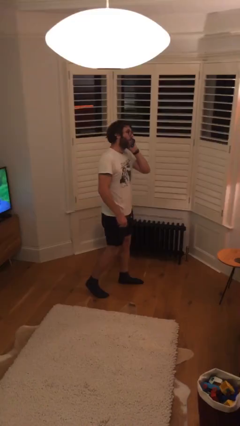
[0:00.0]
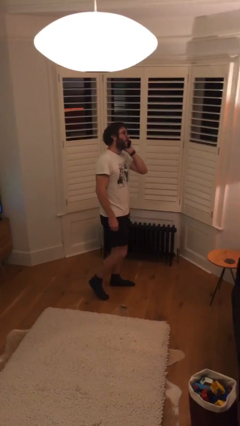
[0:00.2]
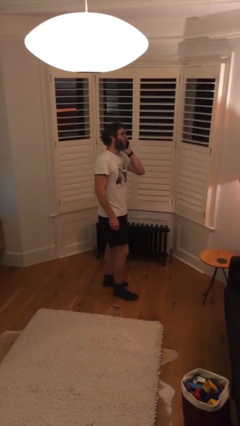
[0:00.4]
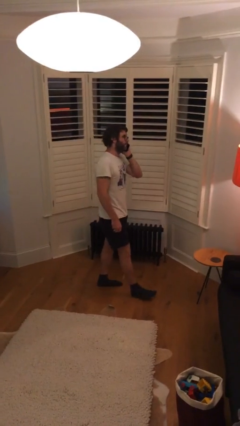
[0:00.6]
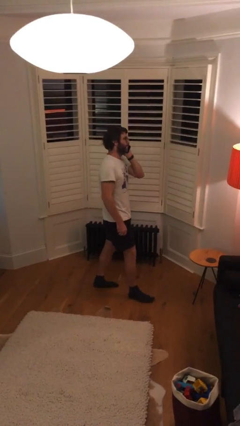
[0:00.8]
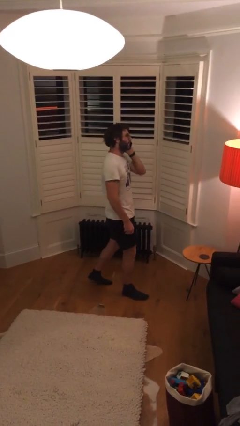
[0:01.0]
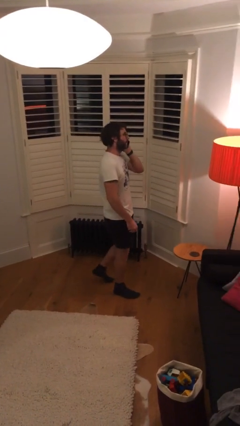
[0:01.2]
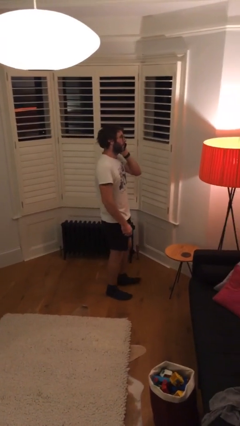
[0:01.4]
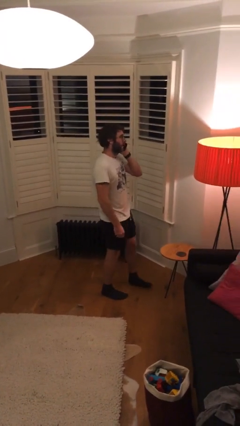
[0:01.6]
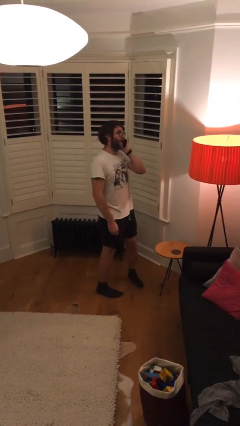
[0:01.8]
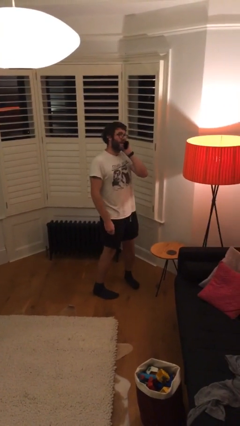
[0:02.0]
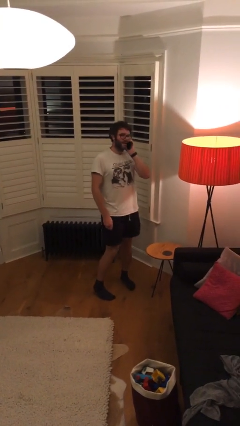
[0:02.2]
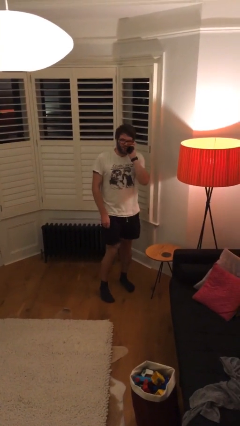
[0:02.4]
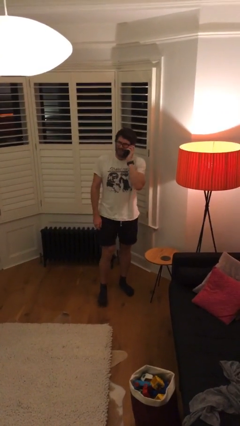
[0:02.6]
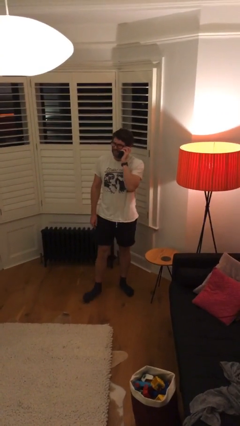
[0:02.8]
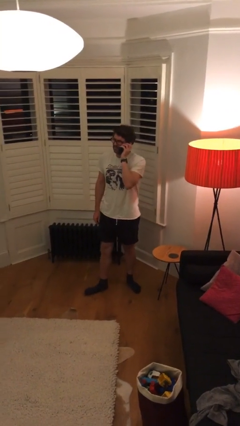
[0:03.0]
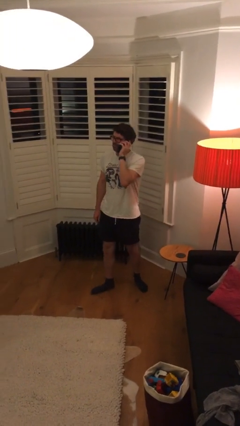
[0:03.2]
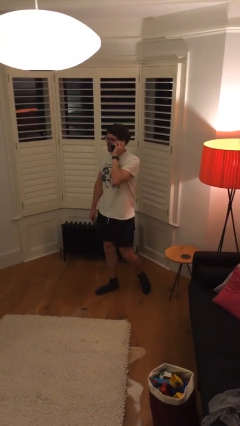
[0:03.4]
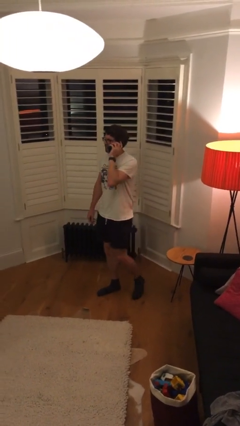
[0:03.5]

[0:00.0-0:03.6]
person talks on phone

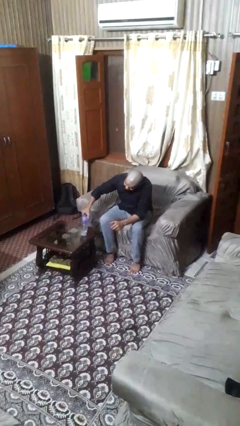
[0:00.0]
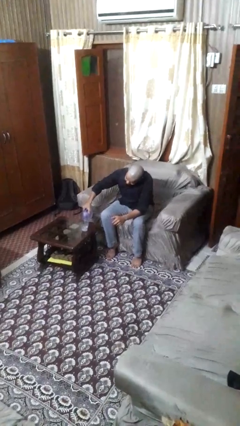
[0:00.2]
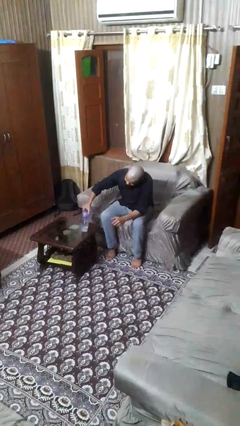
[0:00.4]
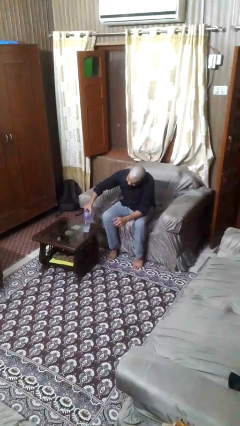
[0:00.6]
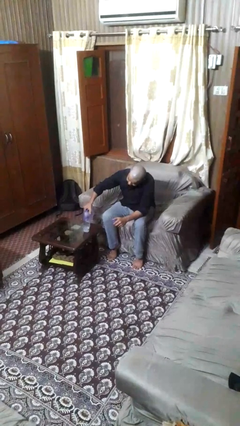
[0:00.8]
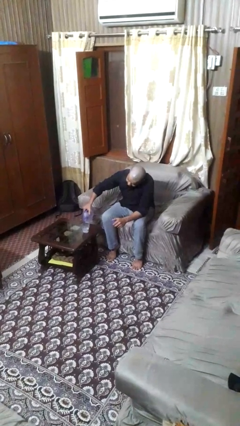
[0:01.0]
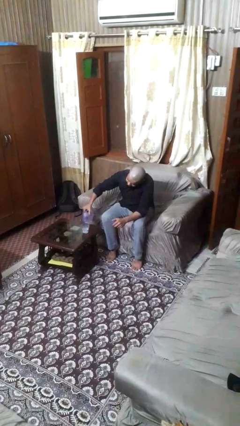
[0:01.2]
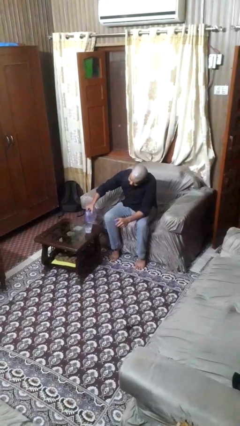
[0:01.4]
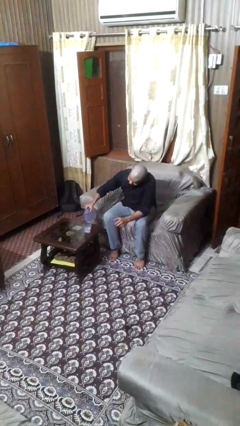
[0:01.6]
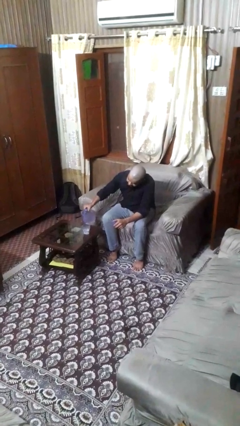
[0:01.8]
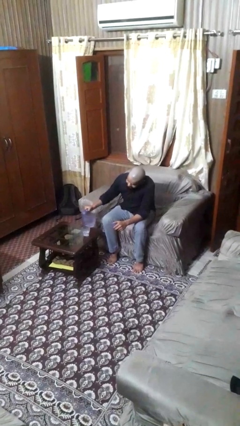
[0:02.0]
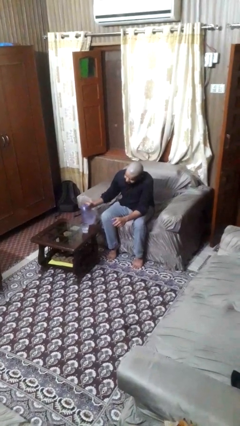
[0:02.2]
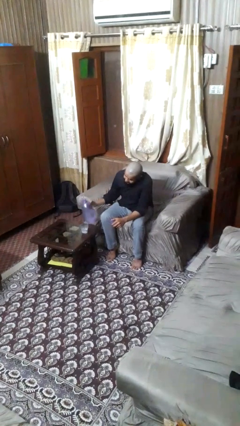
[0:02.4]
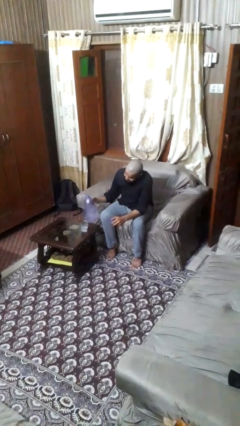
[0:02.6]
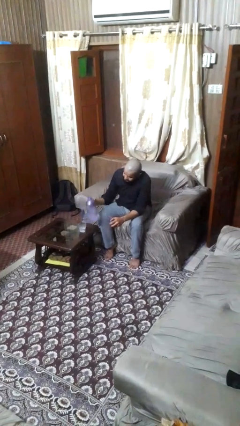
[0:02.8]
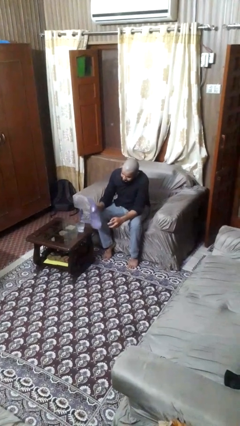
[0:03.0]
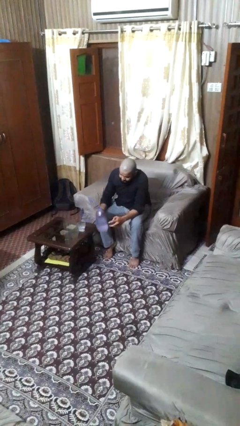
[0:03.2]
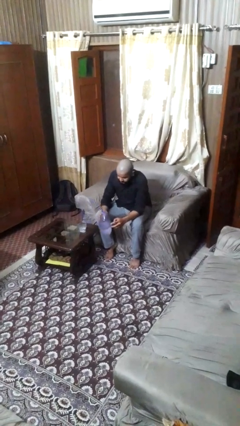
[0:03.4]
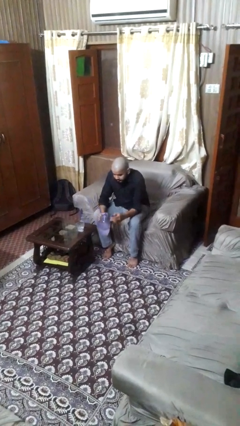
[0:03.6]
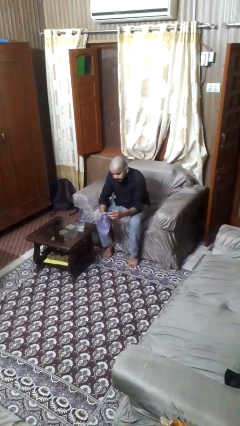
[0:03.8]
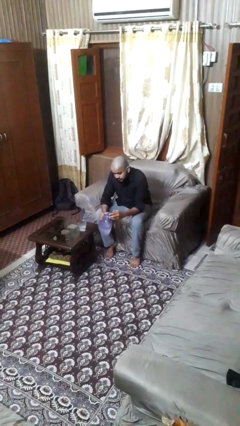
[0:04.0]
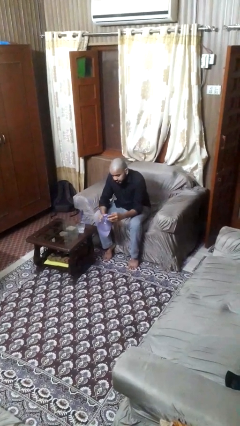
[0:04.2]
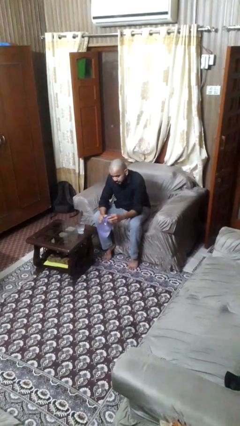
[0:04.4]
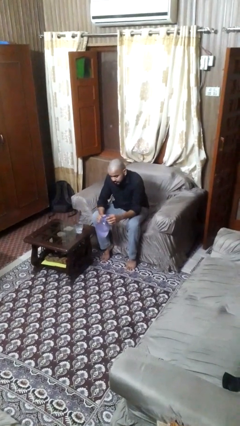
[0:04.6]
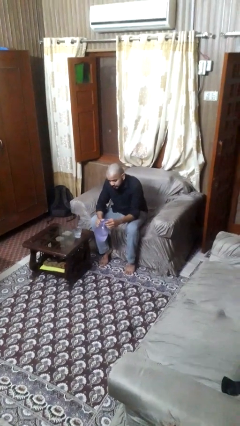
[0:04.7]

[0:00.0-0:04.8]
person pours liquid into cup

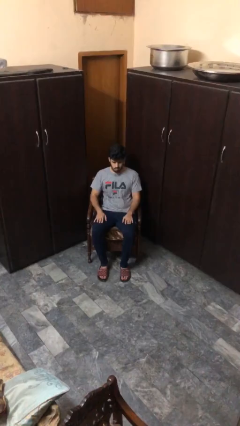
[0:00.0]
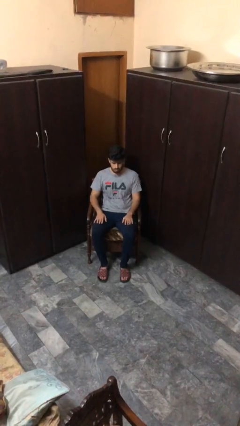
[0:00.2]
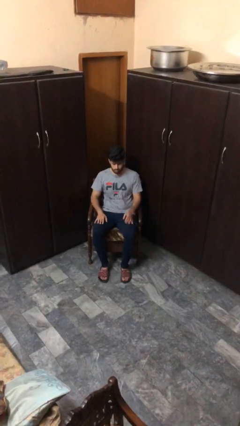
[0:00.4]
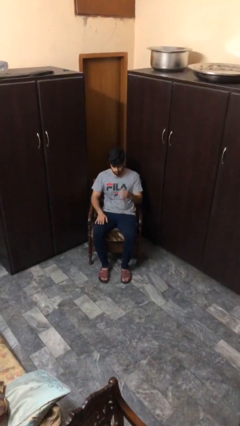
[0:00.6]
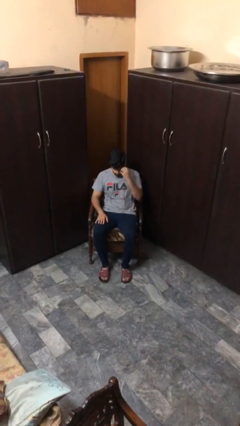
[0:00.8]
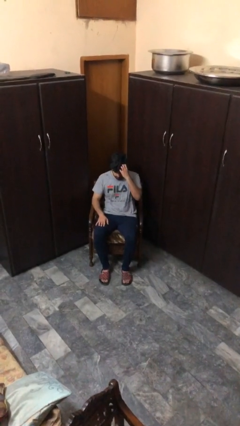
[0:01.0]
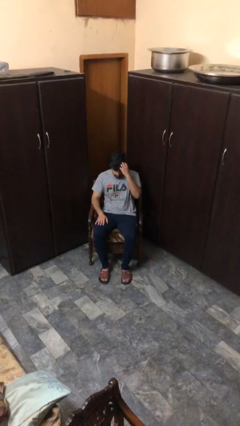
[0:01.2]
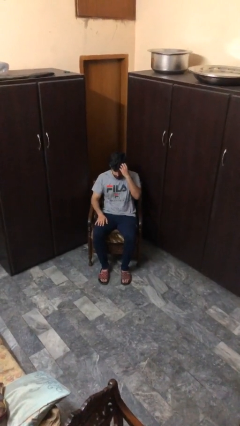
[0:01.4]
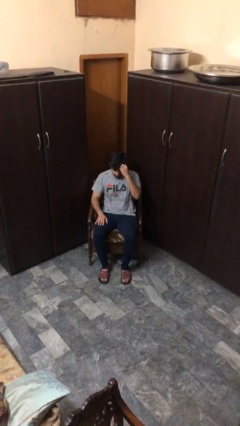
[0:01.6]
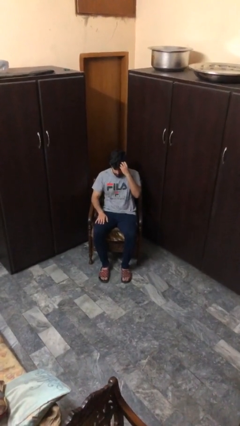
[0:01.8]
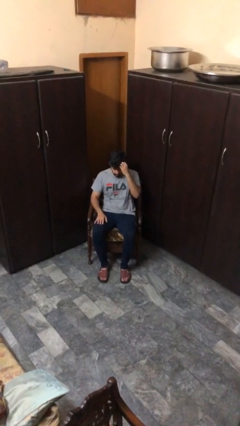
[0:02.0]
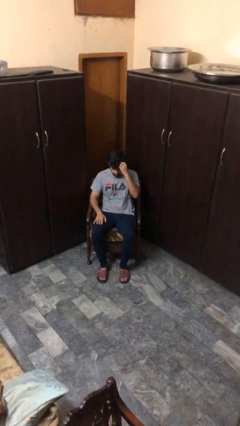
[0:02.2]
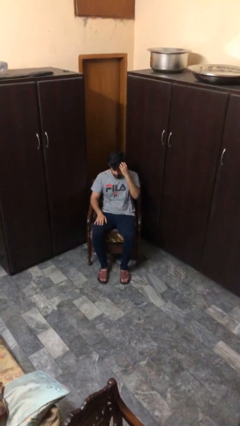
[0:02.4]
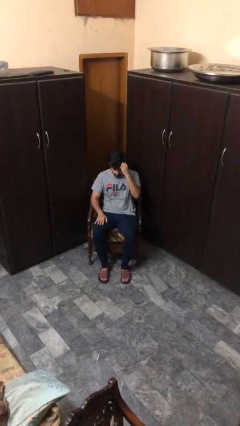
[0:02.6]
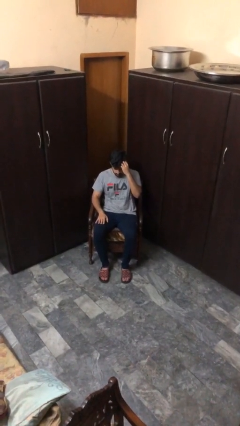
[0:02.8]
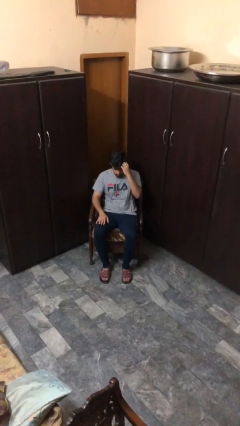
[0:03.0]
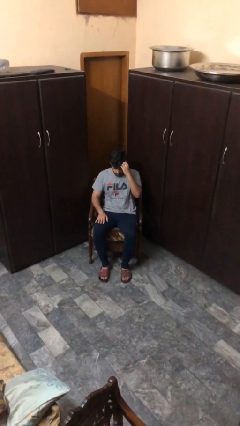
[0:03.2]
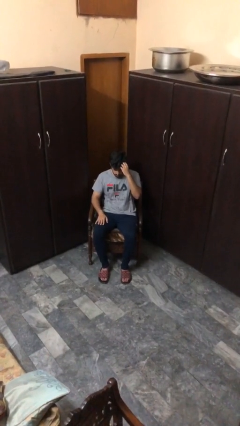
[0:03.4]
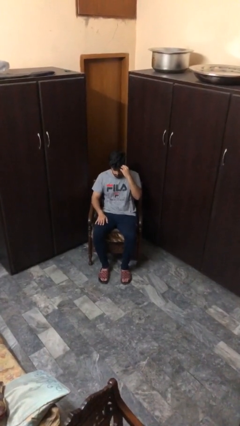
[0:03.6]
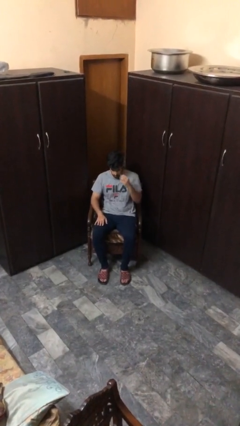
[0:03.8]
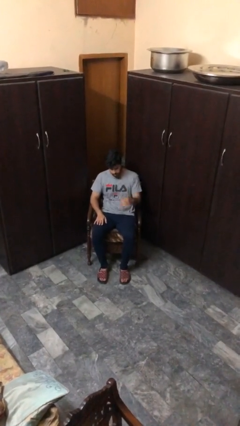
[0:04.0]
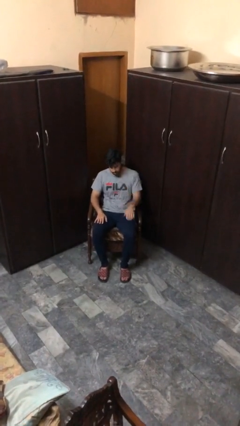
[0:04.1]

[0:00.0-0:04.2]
person scratches face

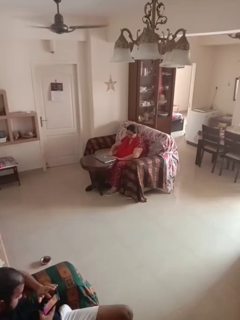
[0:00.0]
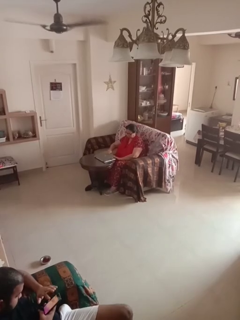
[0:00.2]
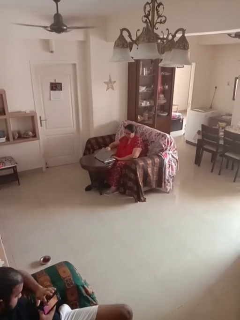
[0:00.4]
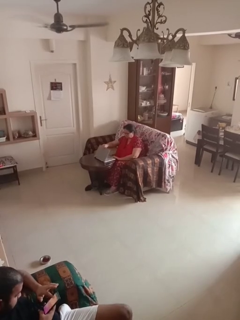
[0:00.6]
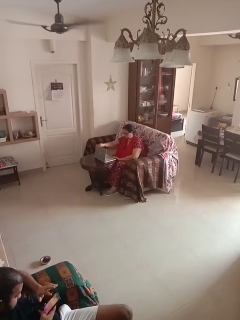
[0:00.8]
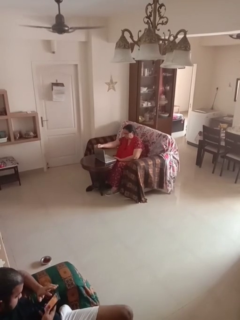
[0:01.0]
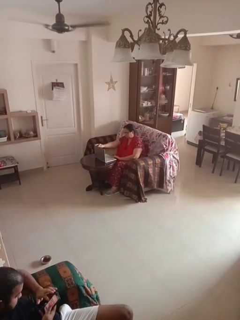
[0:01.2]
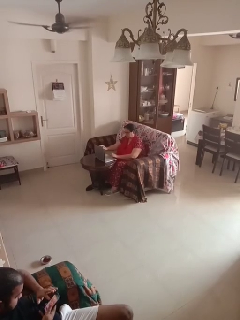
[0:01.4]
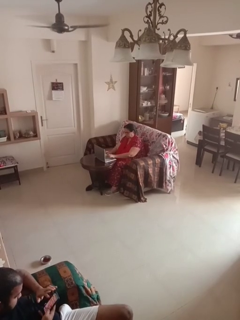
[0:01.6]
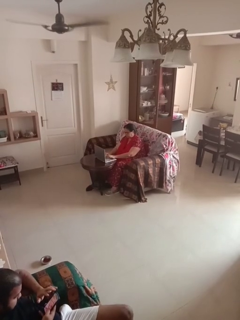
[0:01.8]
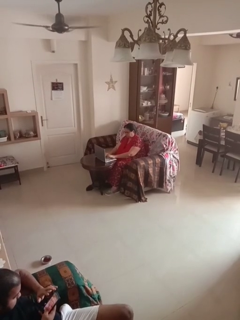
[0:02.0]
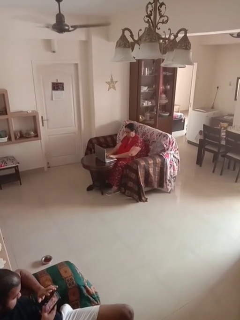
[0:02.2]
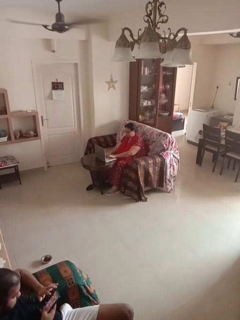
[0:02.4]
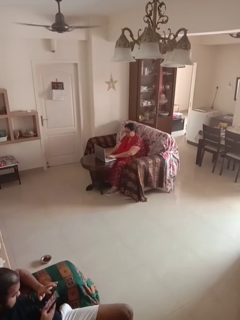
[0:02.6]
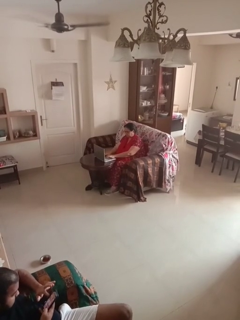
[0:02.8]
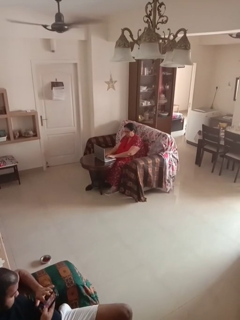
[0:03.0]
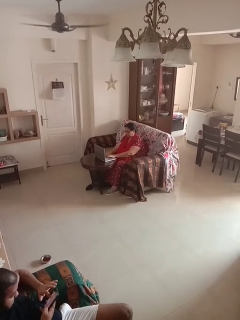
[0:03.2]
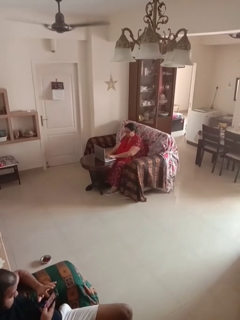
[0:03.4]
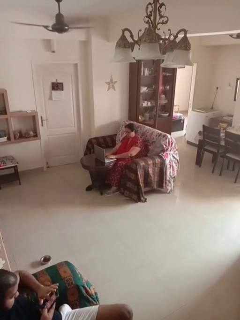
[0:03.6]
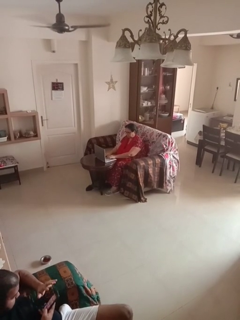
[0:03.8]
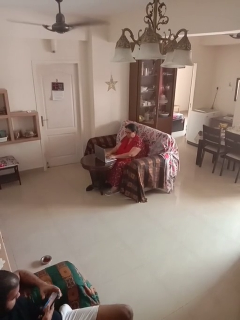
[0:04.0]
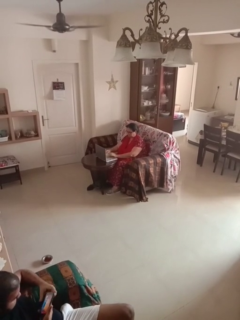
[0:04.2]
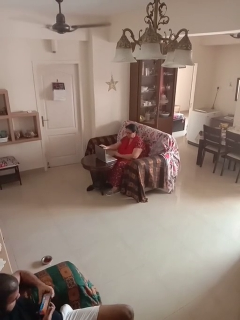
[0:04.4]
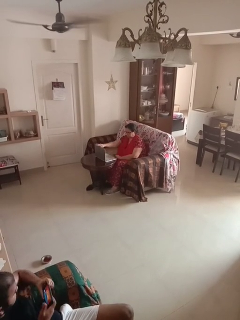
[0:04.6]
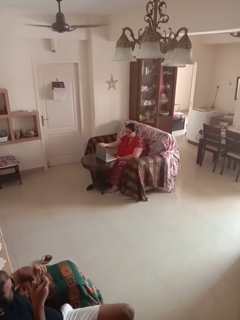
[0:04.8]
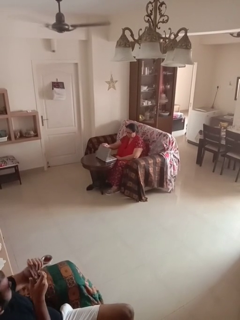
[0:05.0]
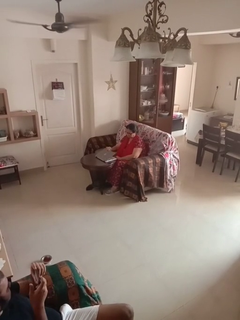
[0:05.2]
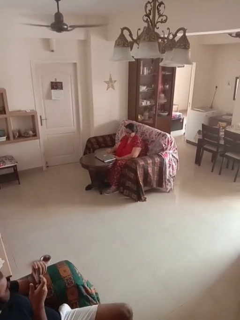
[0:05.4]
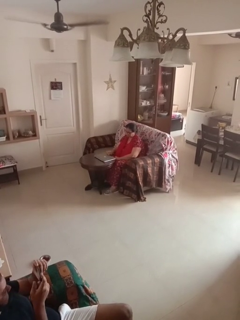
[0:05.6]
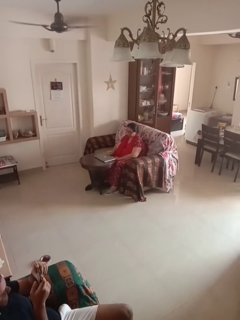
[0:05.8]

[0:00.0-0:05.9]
person interacts with laptop

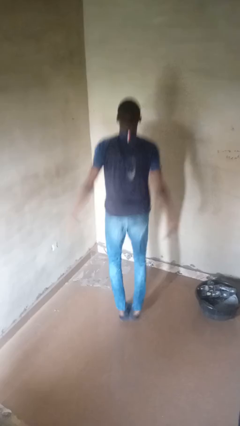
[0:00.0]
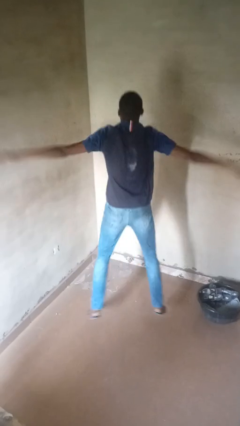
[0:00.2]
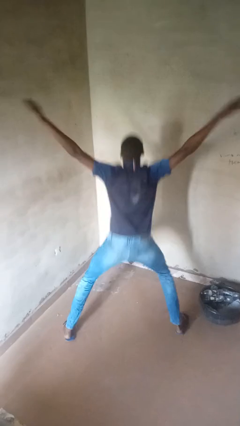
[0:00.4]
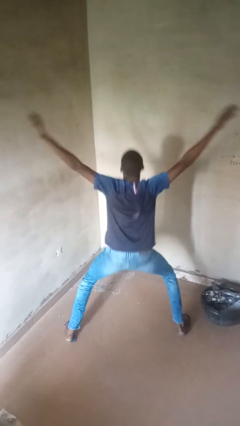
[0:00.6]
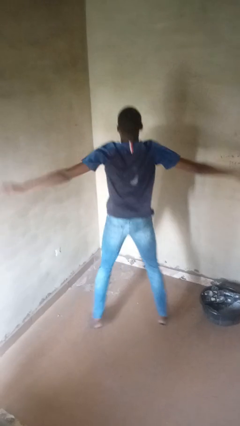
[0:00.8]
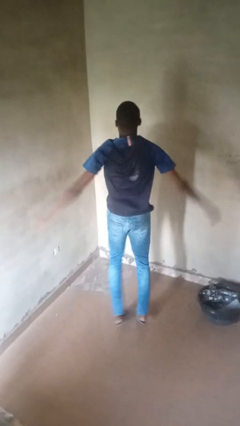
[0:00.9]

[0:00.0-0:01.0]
person exercises with jumping jacks

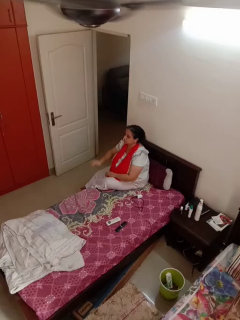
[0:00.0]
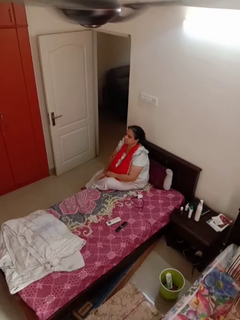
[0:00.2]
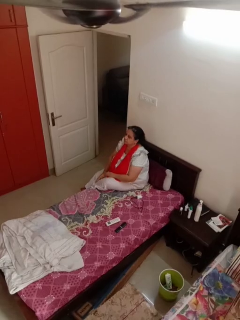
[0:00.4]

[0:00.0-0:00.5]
person gestures lower hand
